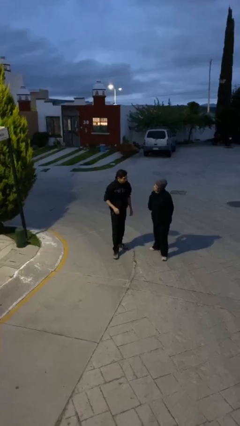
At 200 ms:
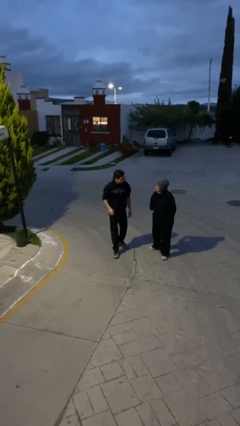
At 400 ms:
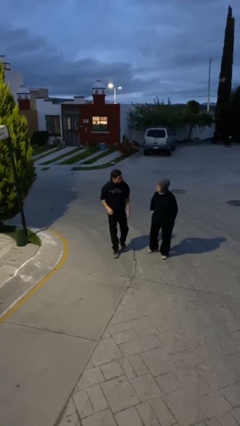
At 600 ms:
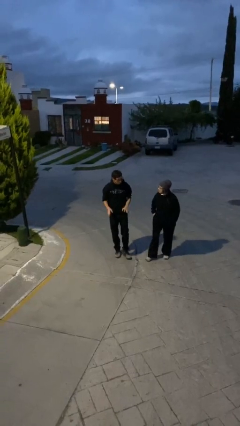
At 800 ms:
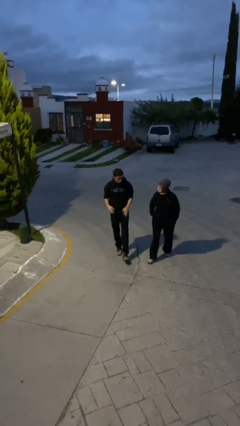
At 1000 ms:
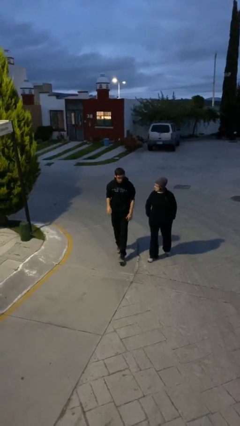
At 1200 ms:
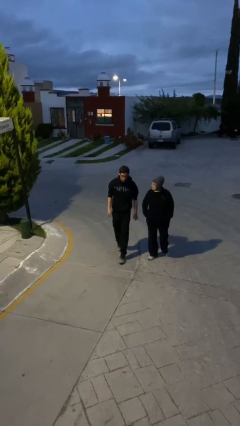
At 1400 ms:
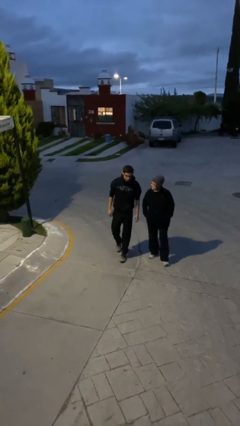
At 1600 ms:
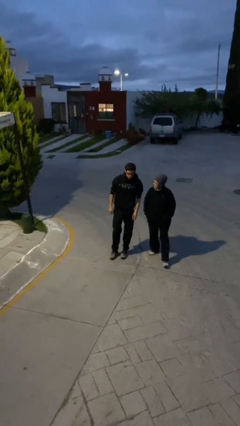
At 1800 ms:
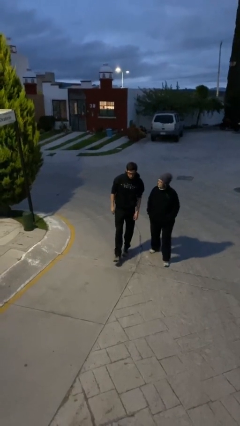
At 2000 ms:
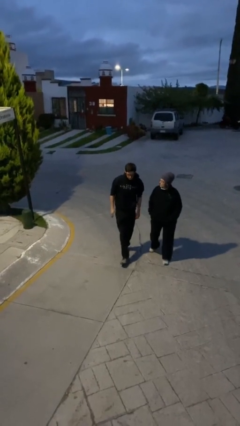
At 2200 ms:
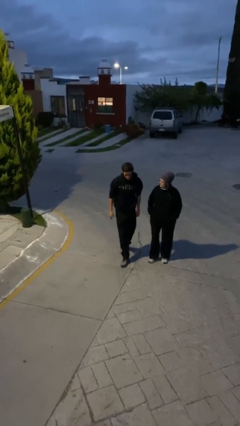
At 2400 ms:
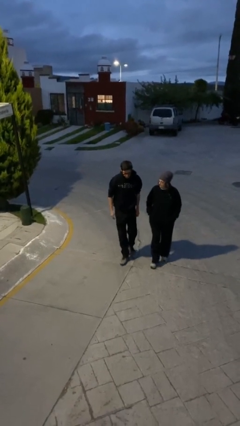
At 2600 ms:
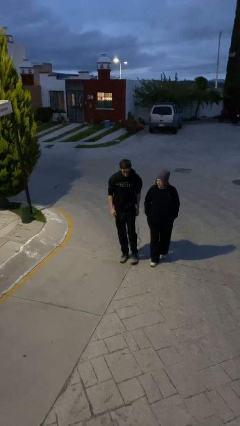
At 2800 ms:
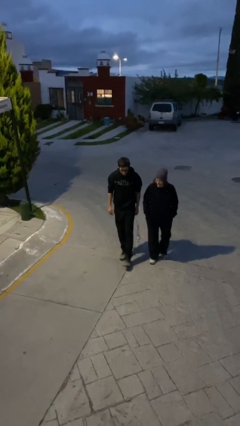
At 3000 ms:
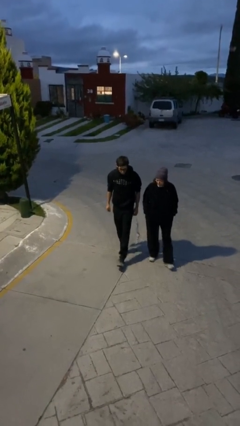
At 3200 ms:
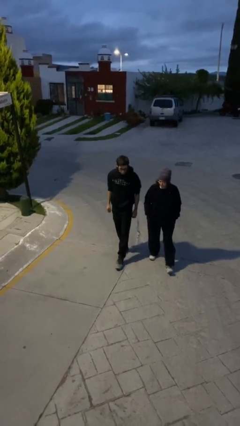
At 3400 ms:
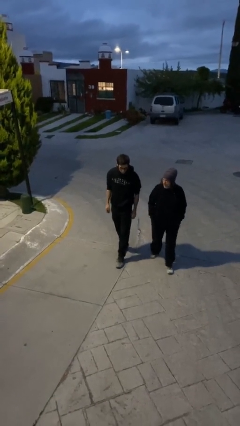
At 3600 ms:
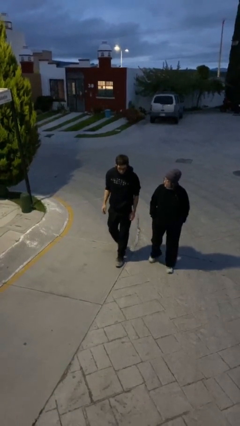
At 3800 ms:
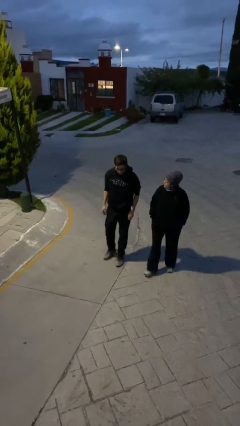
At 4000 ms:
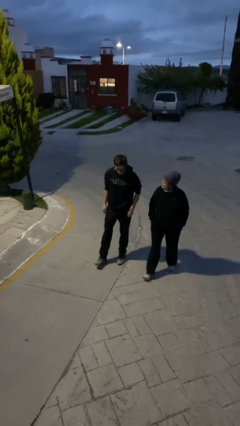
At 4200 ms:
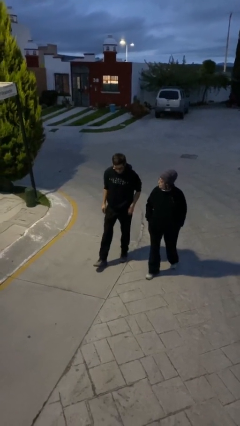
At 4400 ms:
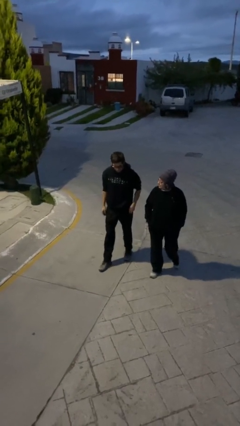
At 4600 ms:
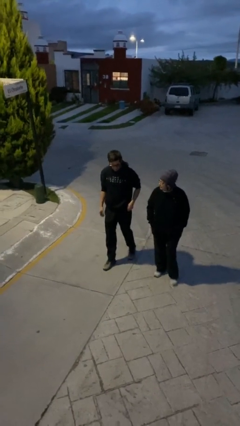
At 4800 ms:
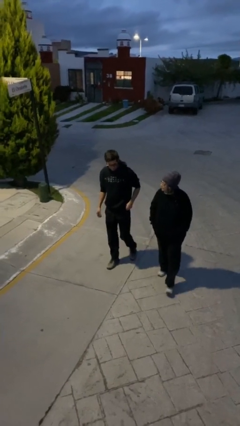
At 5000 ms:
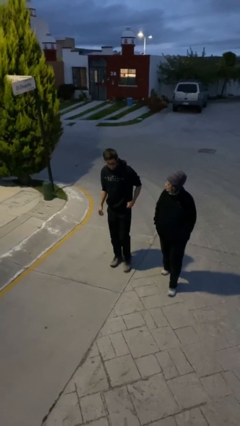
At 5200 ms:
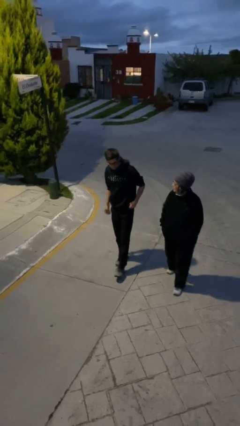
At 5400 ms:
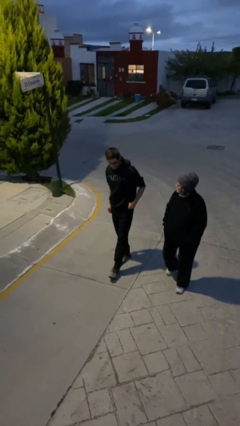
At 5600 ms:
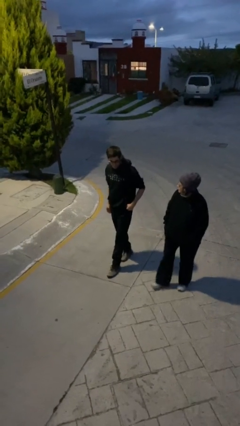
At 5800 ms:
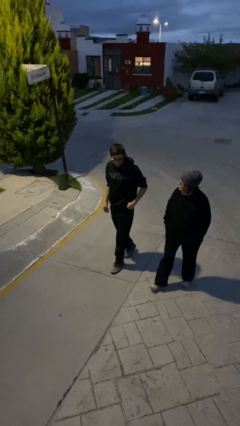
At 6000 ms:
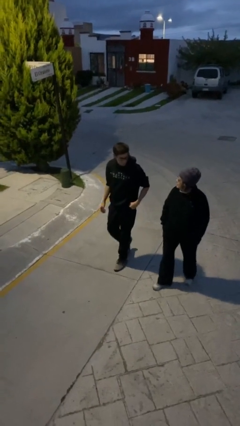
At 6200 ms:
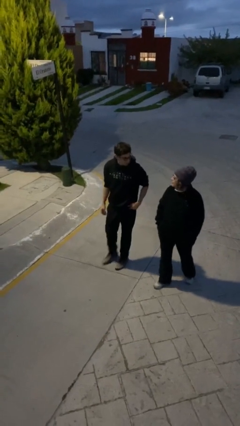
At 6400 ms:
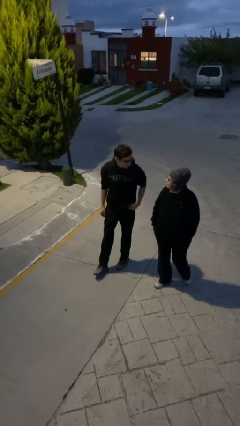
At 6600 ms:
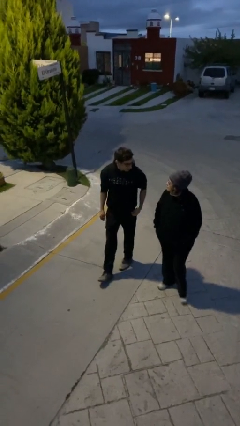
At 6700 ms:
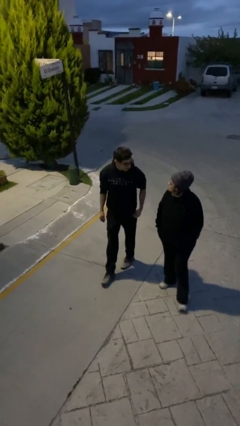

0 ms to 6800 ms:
person talks to person

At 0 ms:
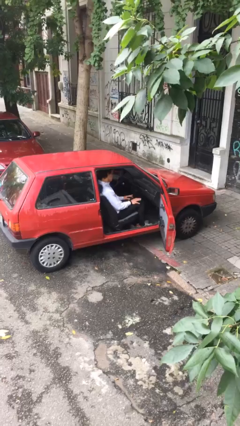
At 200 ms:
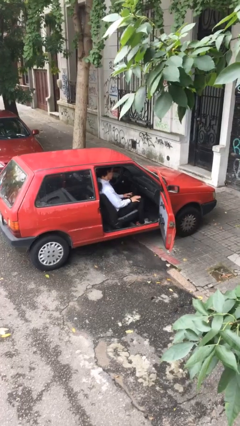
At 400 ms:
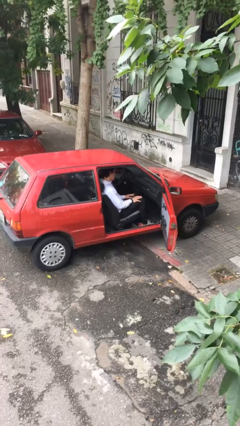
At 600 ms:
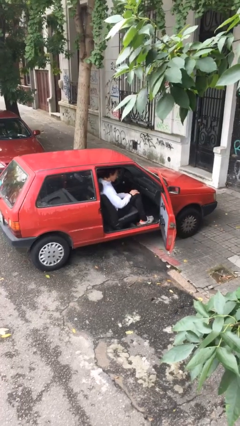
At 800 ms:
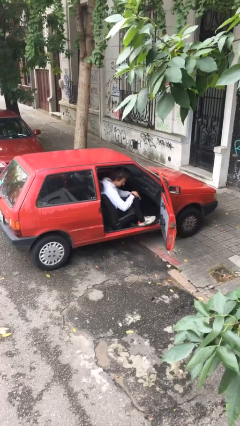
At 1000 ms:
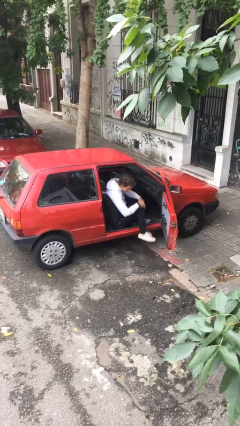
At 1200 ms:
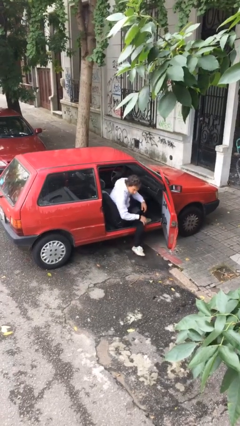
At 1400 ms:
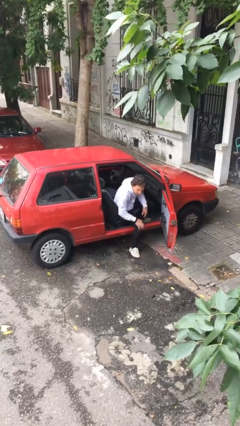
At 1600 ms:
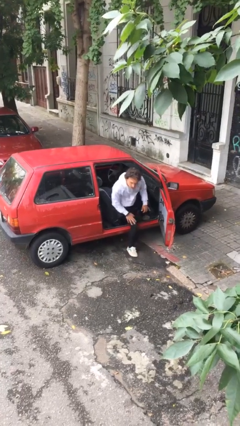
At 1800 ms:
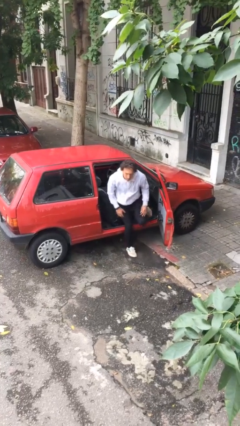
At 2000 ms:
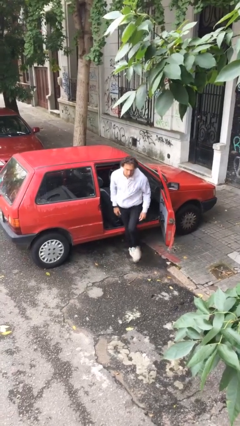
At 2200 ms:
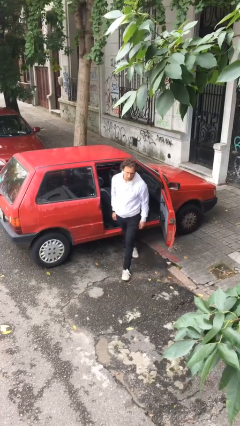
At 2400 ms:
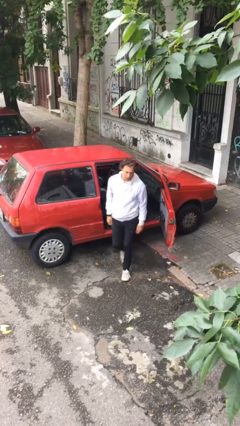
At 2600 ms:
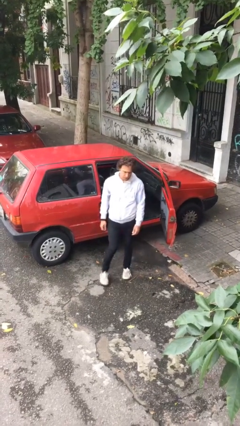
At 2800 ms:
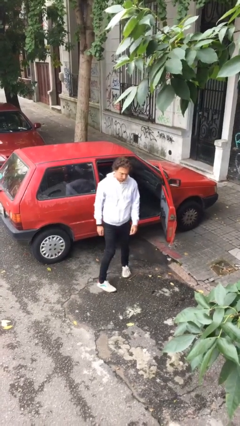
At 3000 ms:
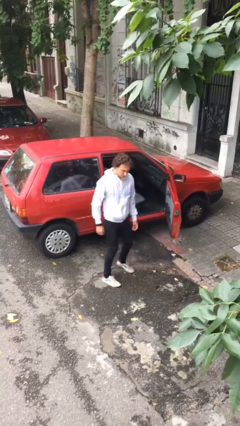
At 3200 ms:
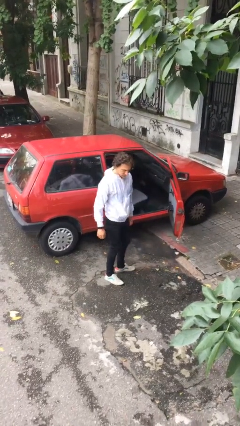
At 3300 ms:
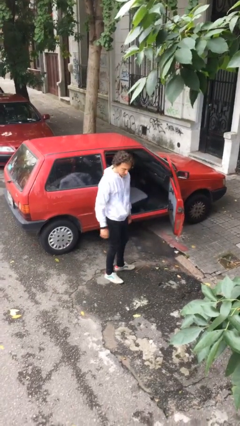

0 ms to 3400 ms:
person exits car

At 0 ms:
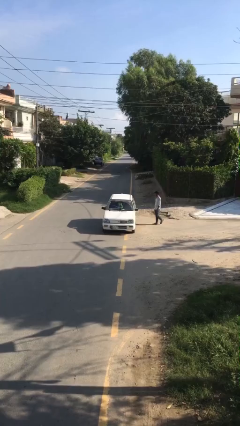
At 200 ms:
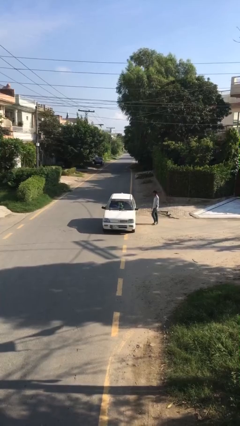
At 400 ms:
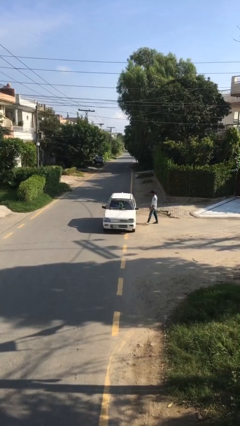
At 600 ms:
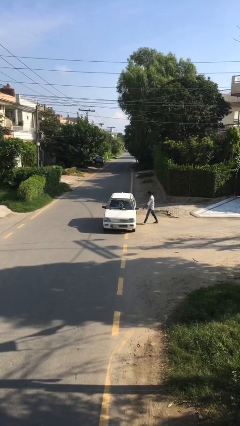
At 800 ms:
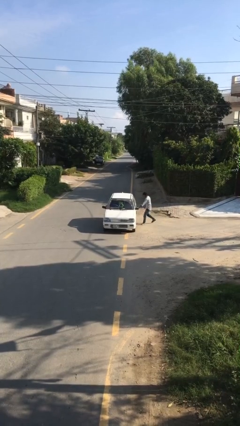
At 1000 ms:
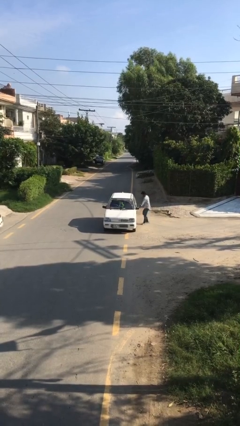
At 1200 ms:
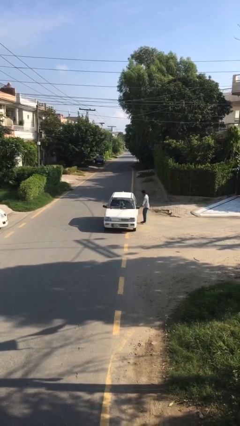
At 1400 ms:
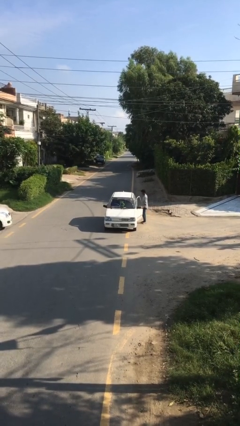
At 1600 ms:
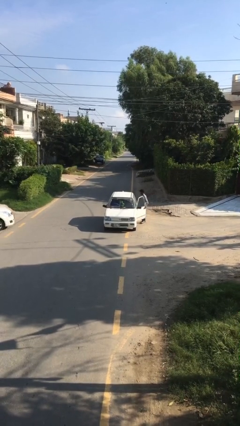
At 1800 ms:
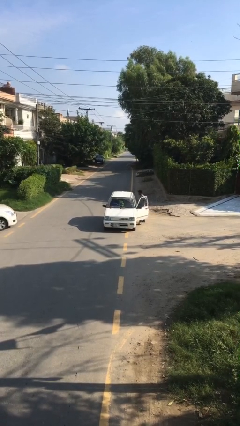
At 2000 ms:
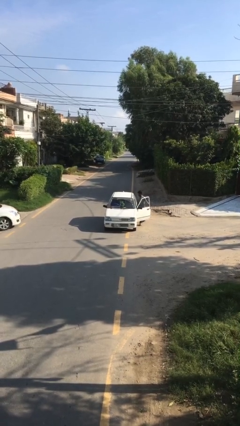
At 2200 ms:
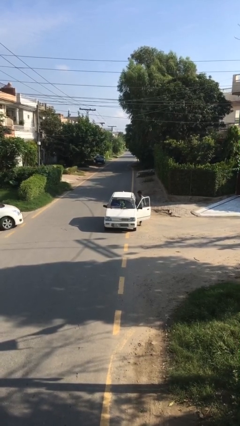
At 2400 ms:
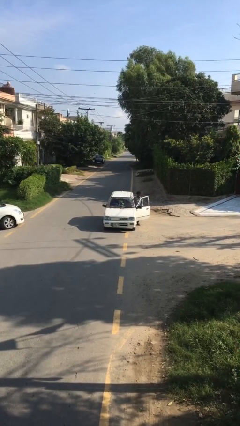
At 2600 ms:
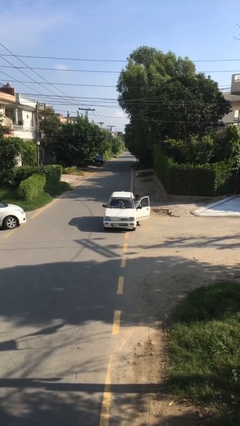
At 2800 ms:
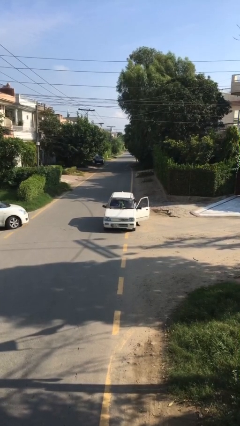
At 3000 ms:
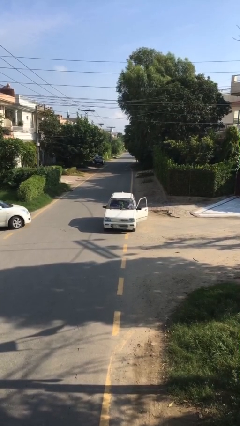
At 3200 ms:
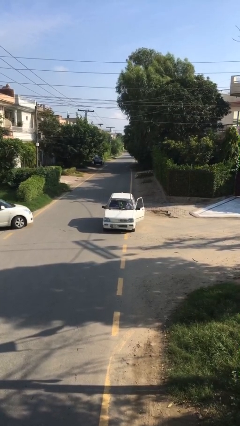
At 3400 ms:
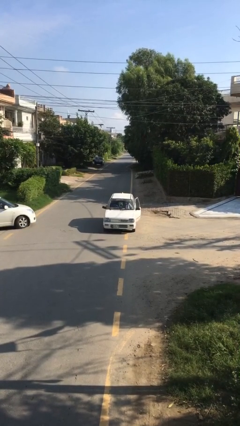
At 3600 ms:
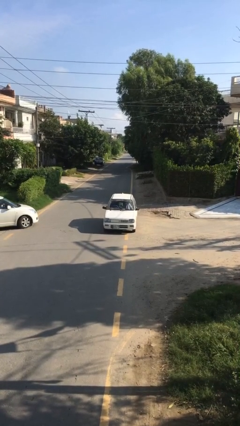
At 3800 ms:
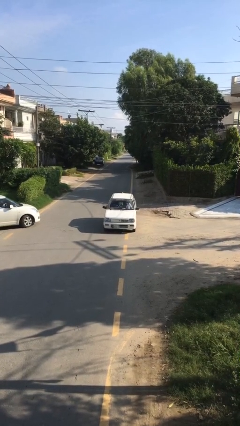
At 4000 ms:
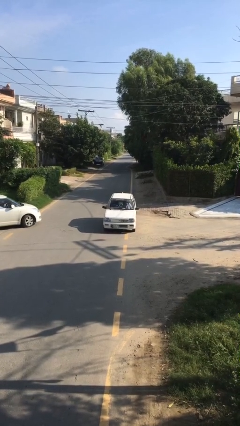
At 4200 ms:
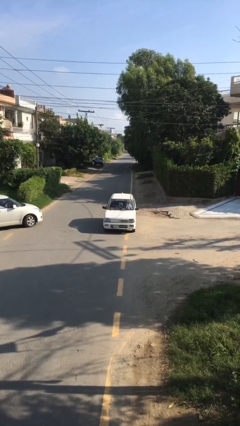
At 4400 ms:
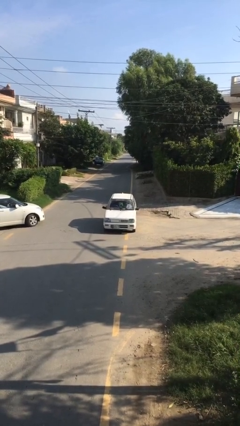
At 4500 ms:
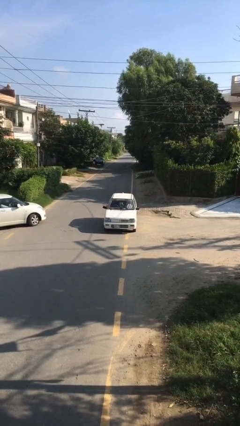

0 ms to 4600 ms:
car picks up person

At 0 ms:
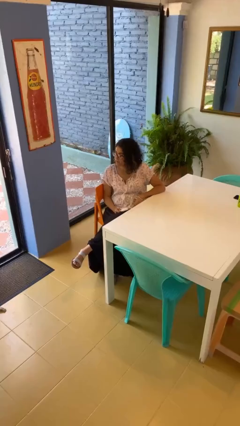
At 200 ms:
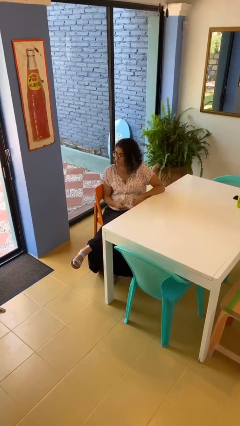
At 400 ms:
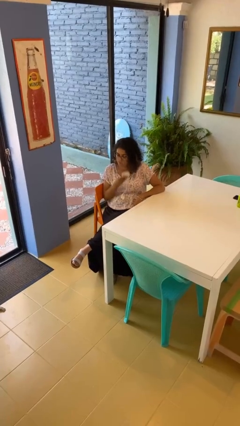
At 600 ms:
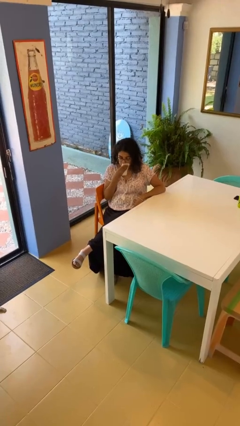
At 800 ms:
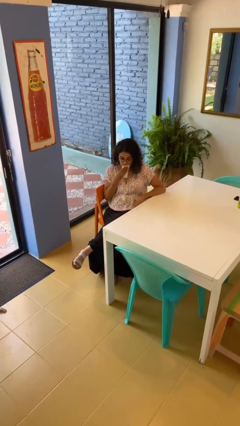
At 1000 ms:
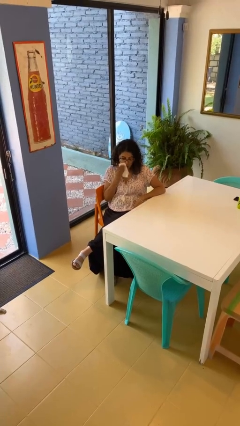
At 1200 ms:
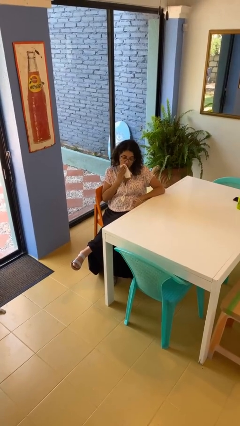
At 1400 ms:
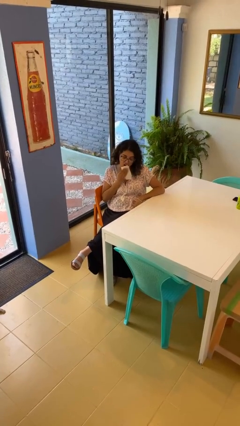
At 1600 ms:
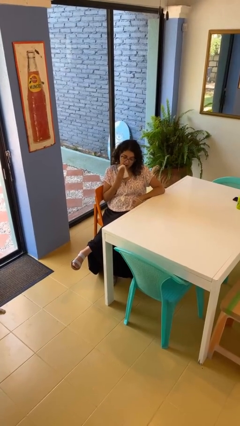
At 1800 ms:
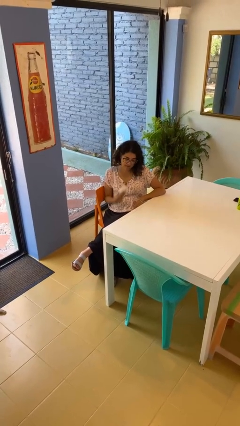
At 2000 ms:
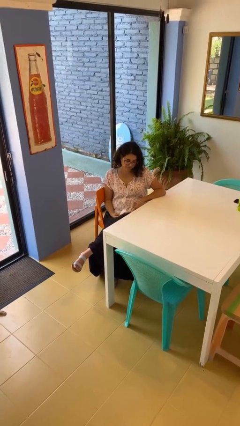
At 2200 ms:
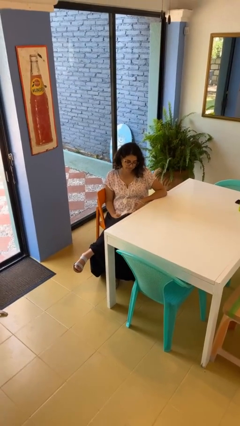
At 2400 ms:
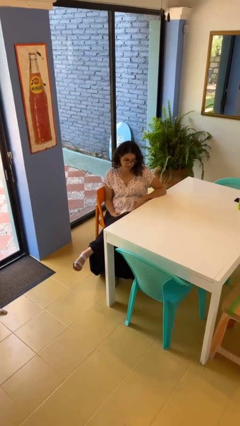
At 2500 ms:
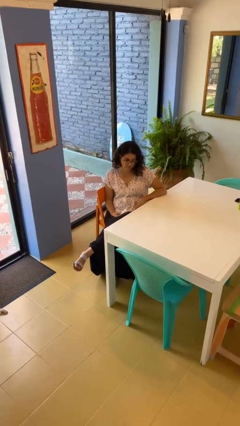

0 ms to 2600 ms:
person wipes mouth with napkin

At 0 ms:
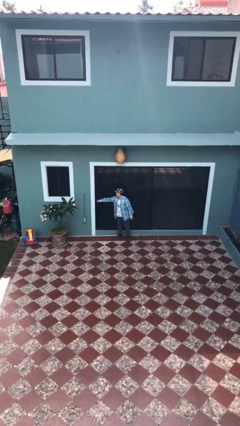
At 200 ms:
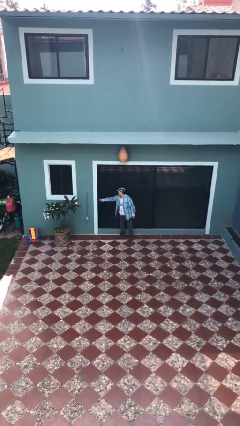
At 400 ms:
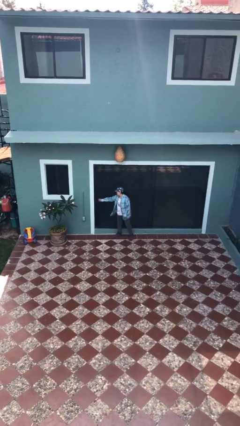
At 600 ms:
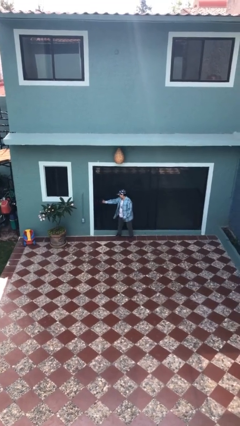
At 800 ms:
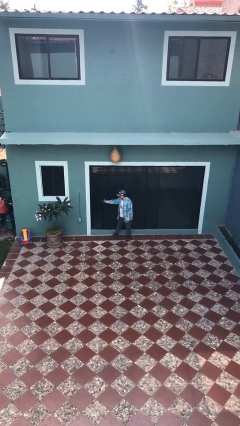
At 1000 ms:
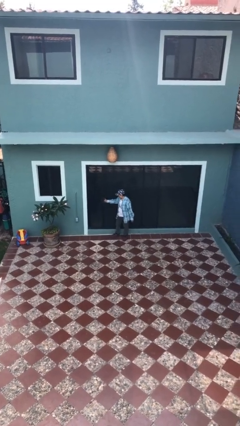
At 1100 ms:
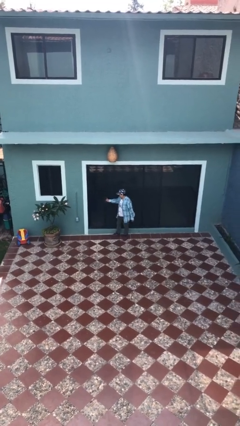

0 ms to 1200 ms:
person opens sliding door
